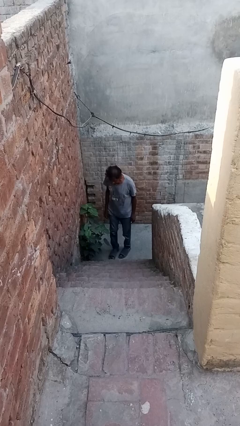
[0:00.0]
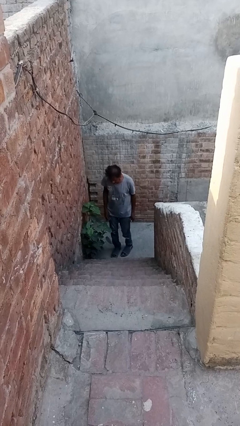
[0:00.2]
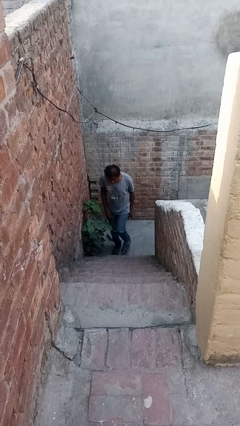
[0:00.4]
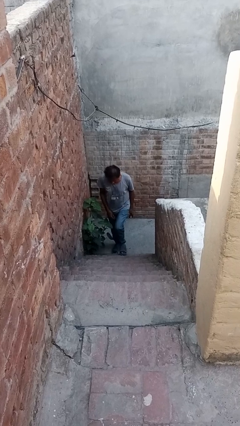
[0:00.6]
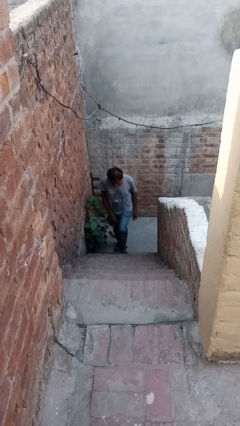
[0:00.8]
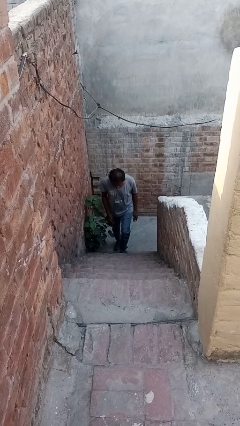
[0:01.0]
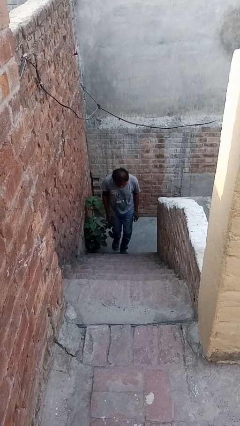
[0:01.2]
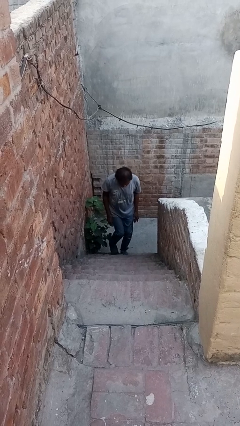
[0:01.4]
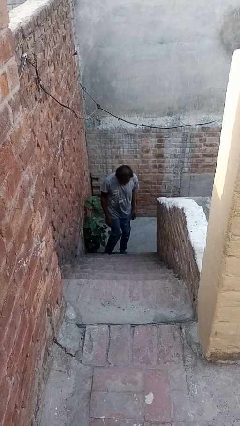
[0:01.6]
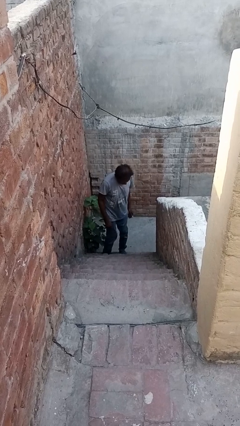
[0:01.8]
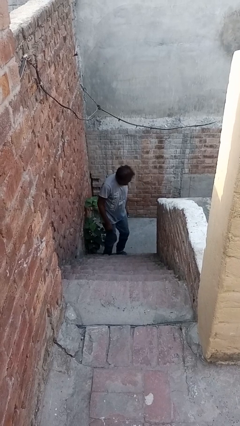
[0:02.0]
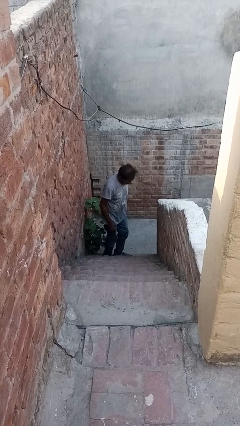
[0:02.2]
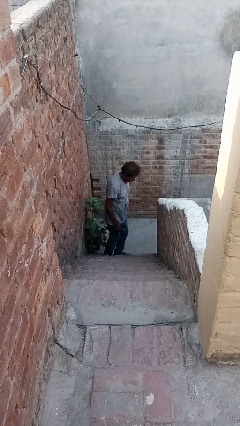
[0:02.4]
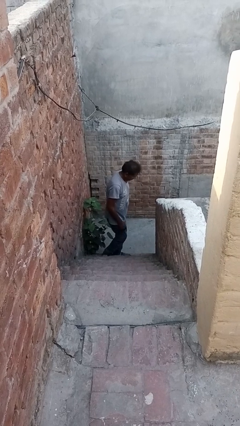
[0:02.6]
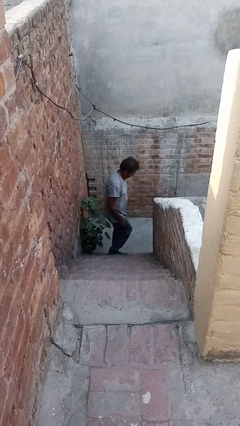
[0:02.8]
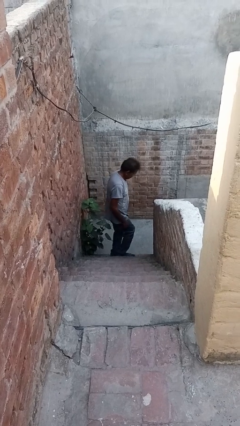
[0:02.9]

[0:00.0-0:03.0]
person climbs up stairs

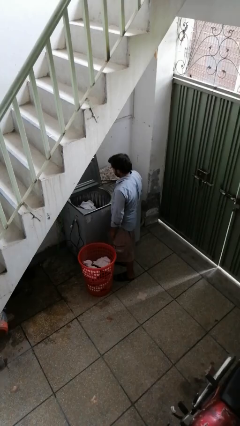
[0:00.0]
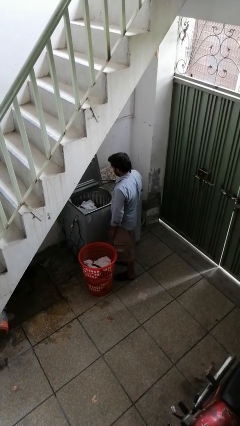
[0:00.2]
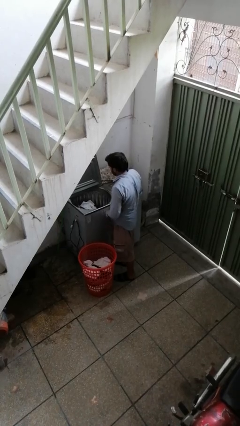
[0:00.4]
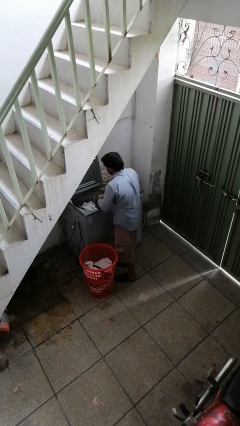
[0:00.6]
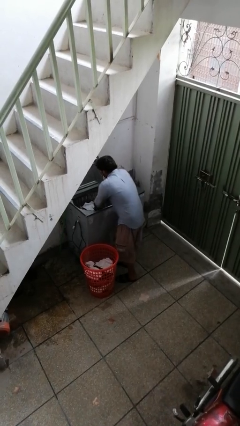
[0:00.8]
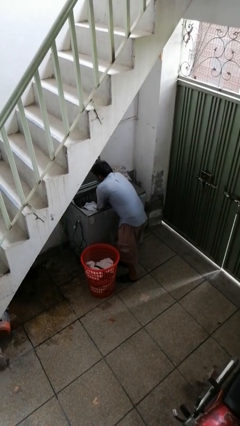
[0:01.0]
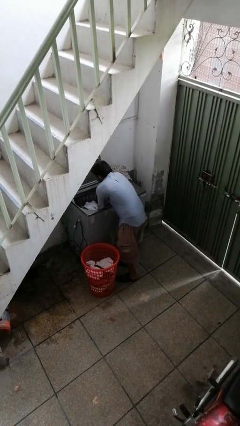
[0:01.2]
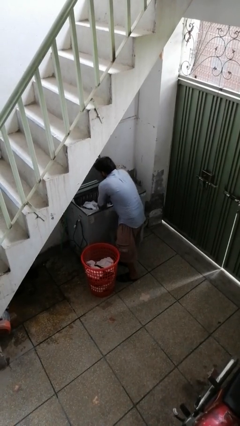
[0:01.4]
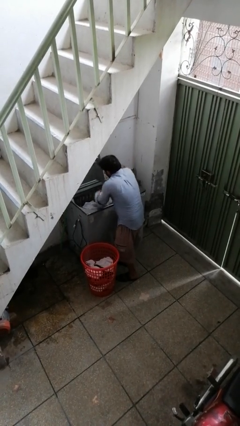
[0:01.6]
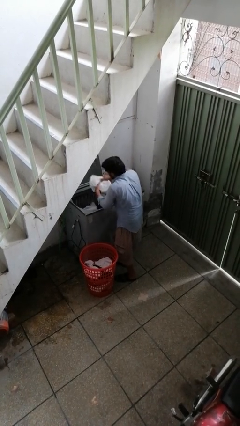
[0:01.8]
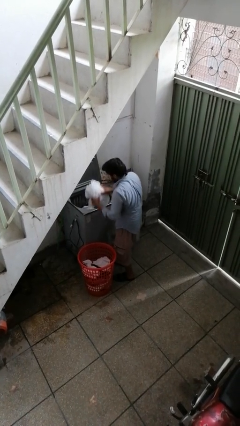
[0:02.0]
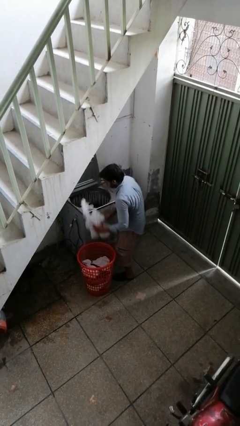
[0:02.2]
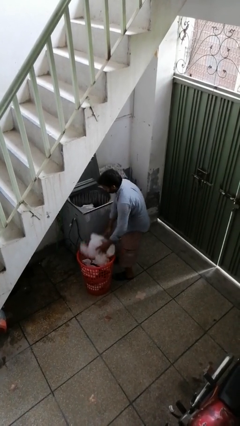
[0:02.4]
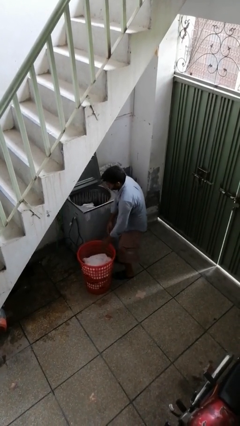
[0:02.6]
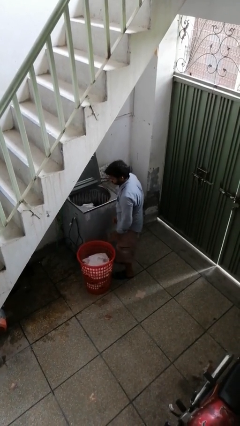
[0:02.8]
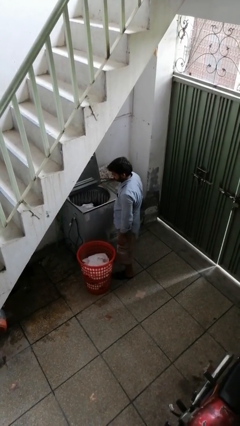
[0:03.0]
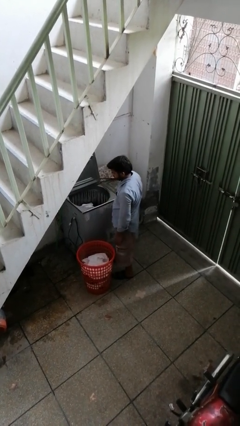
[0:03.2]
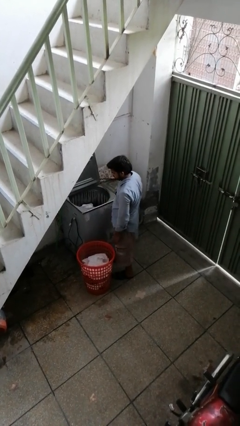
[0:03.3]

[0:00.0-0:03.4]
person unloads clotheswasher

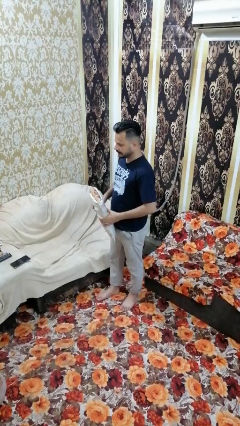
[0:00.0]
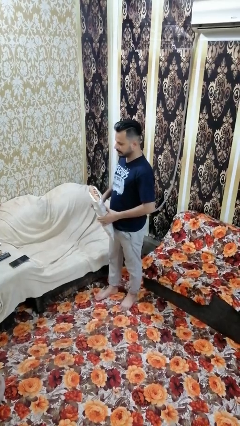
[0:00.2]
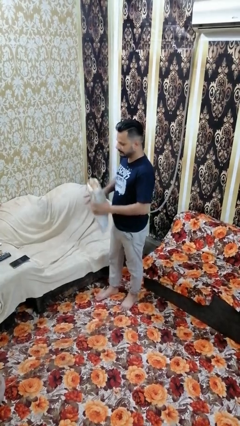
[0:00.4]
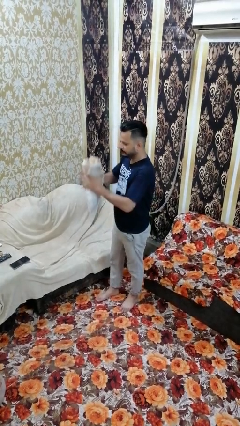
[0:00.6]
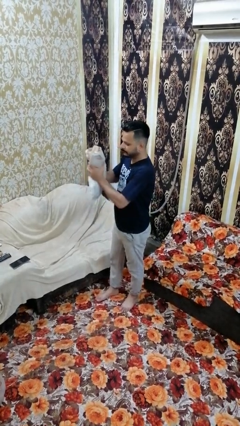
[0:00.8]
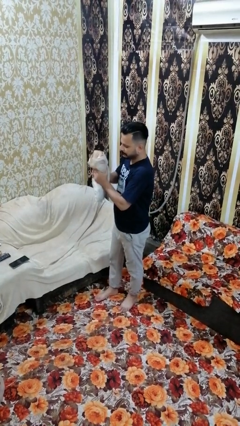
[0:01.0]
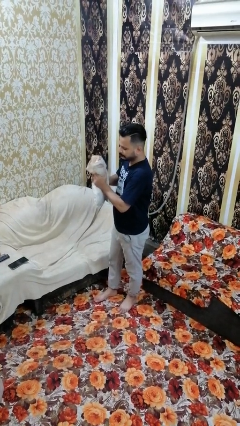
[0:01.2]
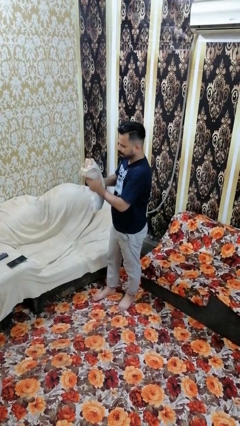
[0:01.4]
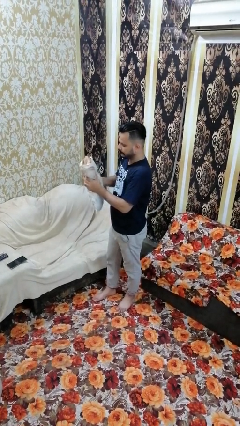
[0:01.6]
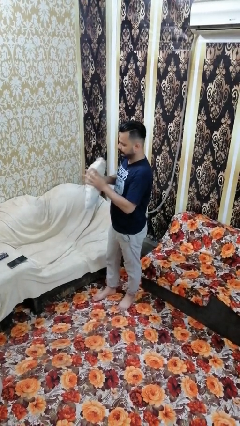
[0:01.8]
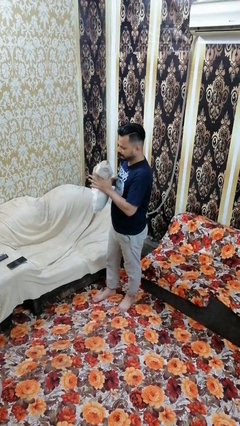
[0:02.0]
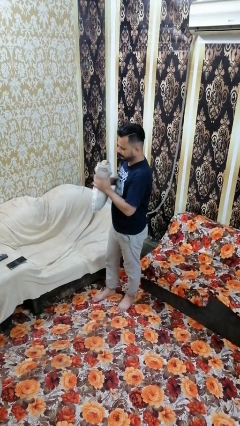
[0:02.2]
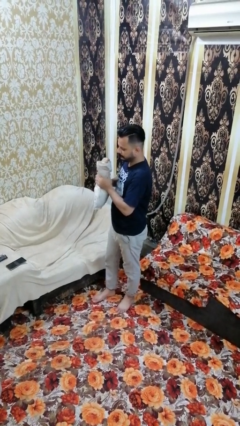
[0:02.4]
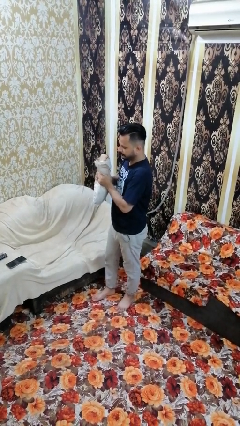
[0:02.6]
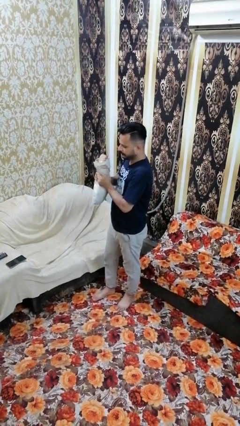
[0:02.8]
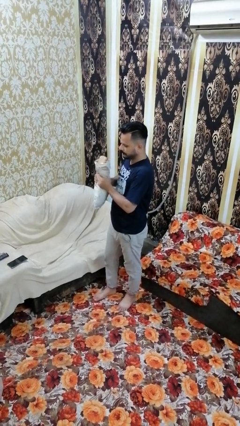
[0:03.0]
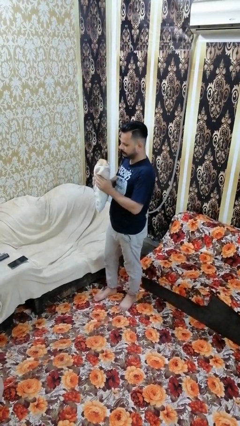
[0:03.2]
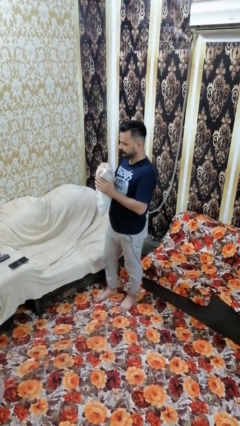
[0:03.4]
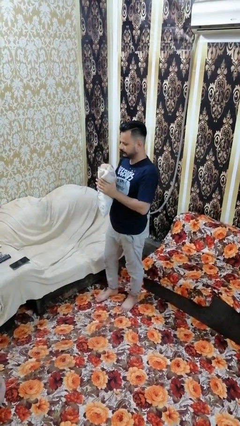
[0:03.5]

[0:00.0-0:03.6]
person squeezes object

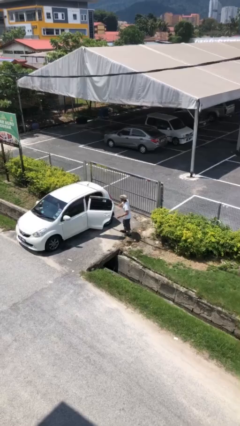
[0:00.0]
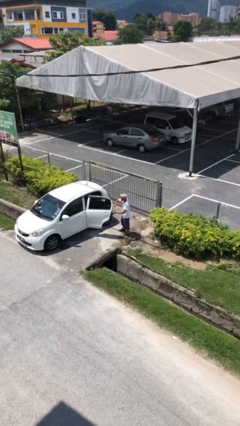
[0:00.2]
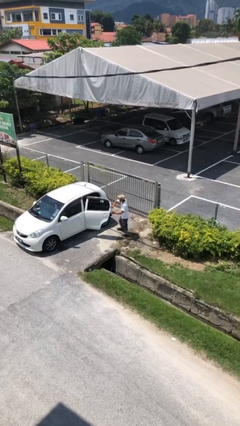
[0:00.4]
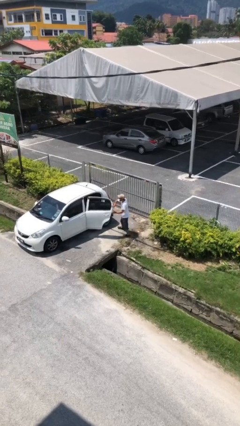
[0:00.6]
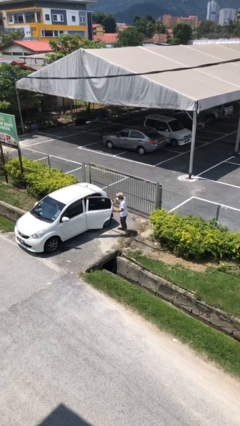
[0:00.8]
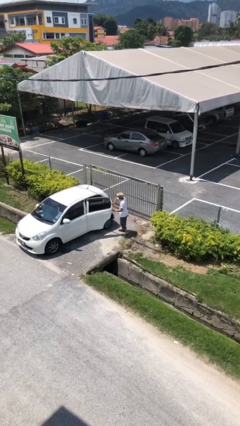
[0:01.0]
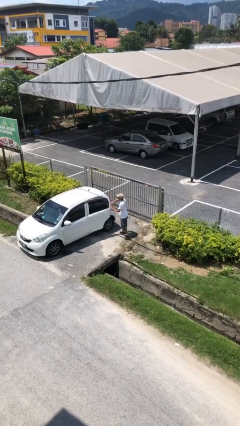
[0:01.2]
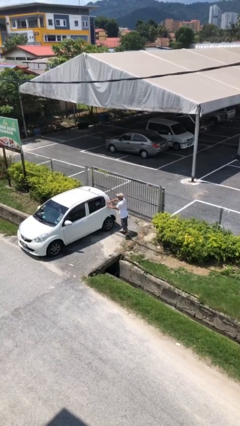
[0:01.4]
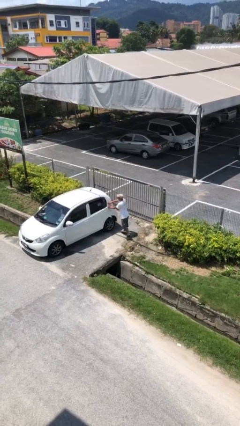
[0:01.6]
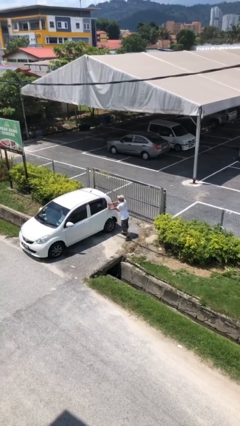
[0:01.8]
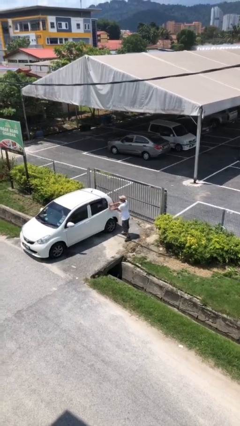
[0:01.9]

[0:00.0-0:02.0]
person closes car door

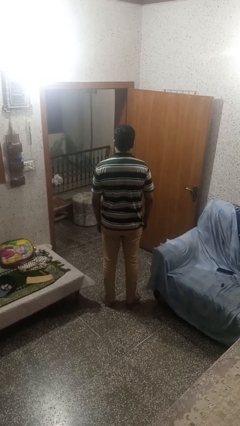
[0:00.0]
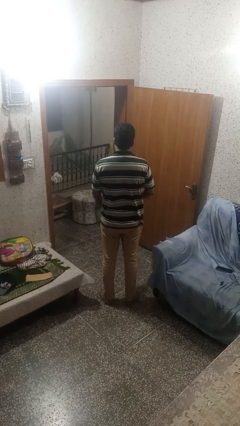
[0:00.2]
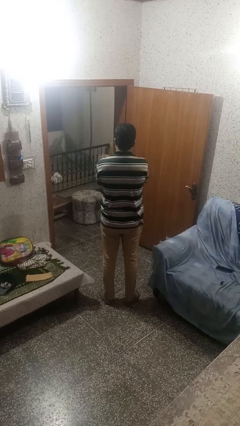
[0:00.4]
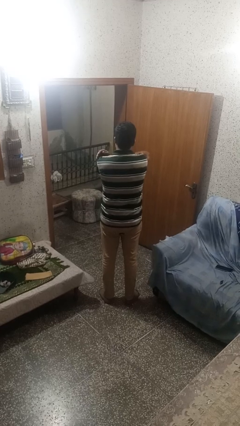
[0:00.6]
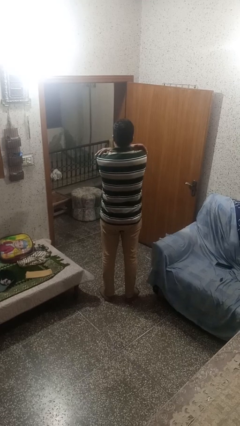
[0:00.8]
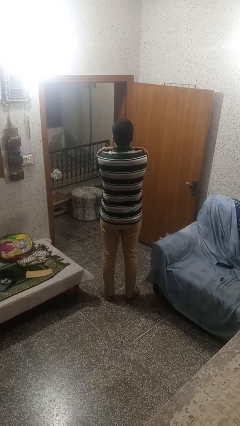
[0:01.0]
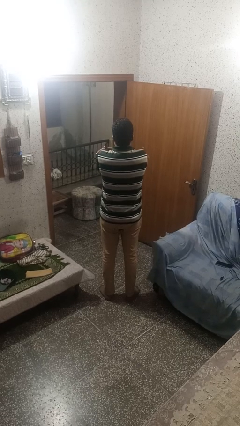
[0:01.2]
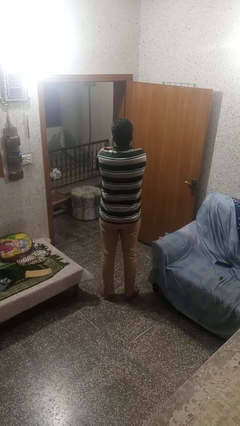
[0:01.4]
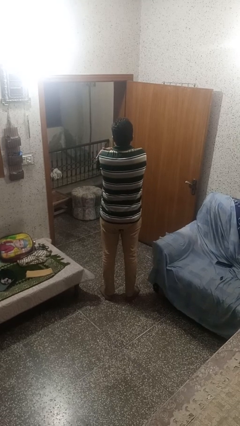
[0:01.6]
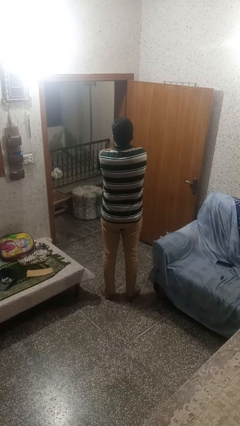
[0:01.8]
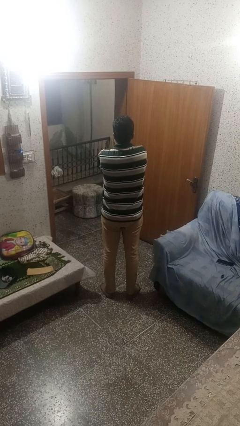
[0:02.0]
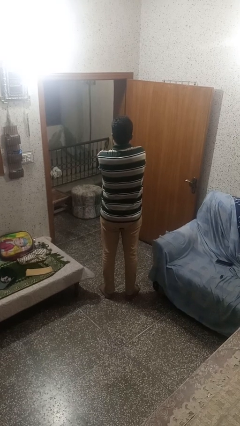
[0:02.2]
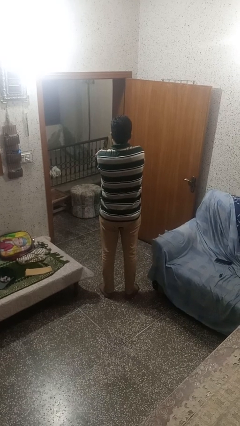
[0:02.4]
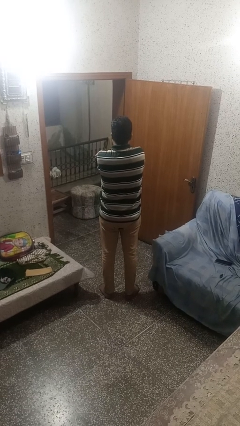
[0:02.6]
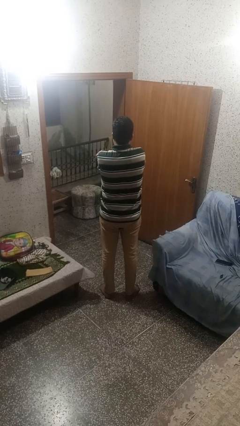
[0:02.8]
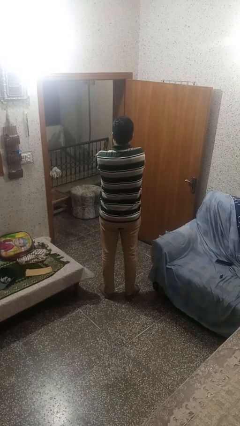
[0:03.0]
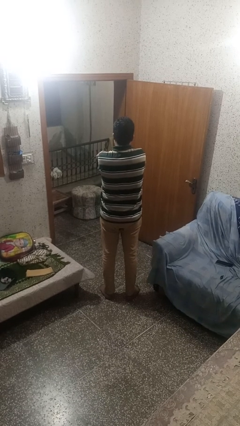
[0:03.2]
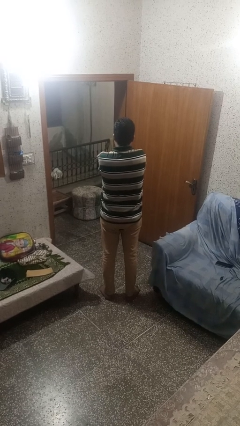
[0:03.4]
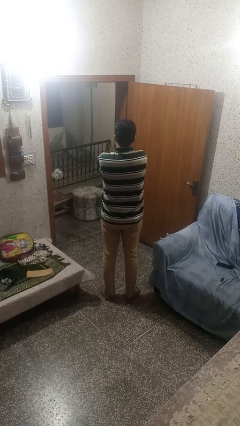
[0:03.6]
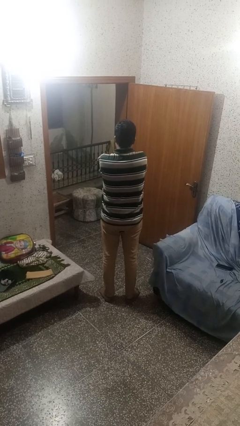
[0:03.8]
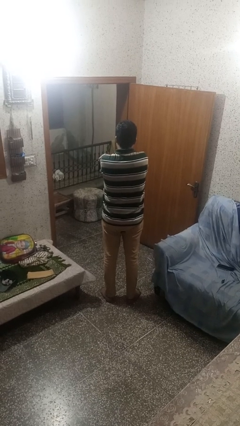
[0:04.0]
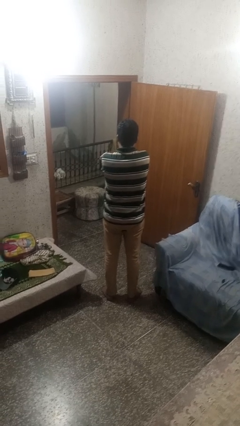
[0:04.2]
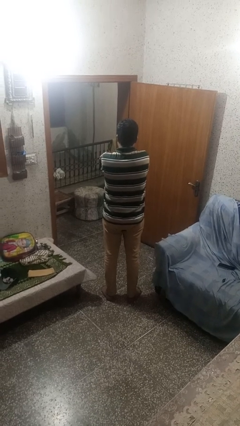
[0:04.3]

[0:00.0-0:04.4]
person crosses arms

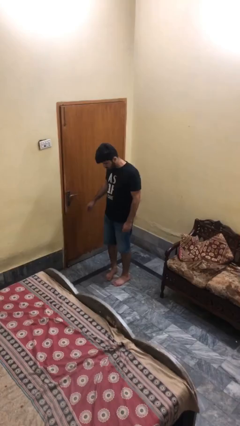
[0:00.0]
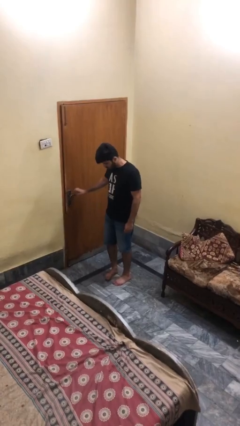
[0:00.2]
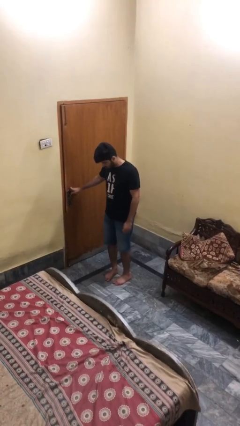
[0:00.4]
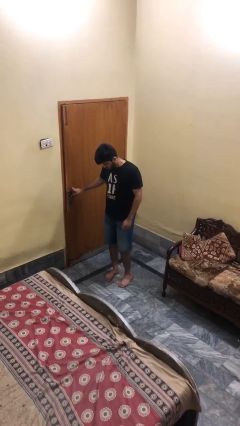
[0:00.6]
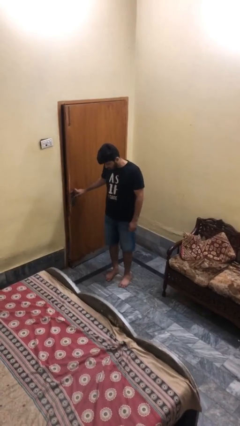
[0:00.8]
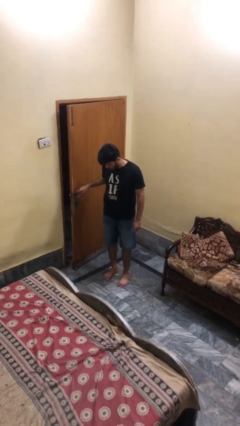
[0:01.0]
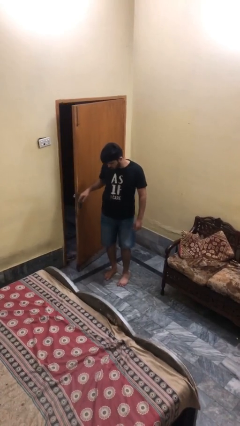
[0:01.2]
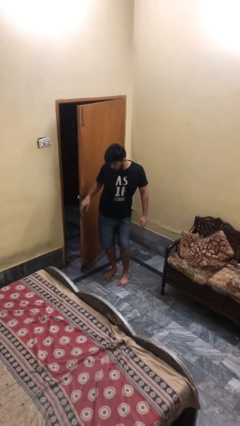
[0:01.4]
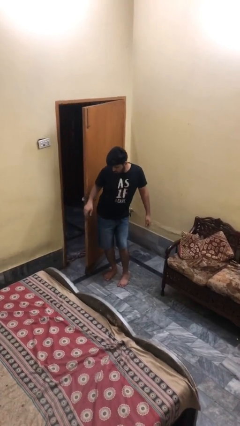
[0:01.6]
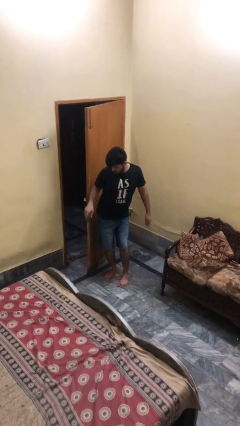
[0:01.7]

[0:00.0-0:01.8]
person opens facility door
